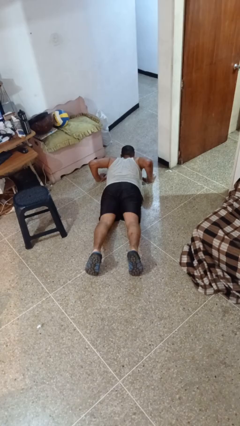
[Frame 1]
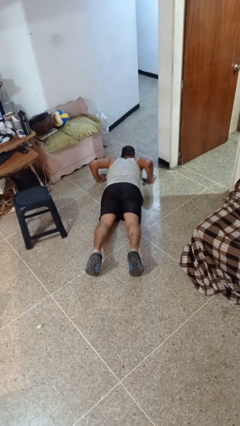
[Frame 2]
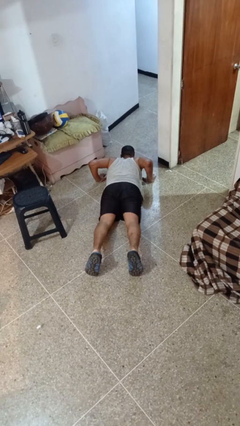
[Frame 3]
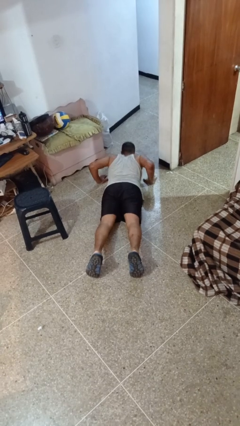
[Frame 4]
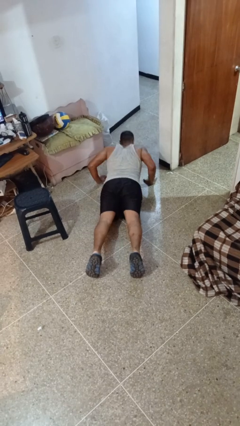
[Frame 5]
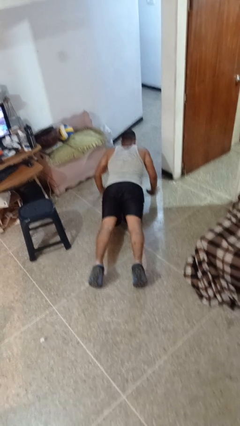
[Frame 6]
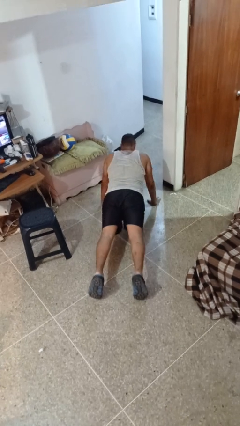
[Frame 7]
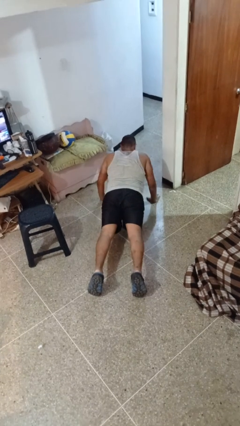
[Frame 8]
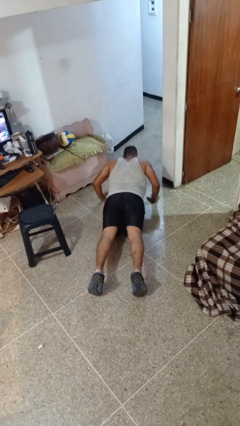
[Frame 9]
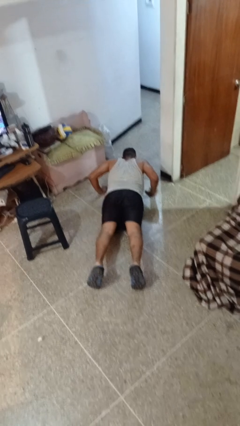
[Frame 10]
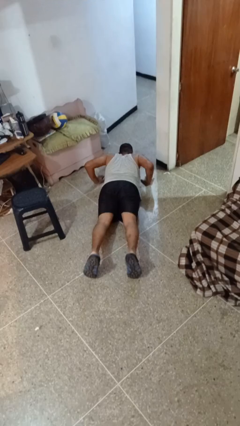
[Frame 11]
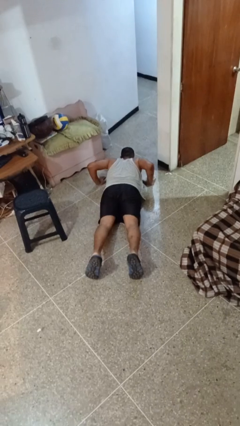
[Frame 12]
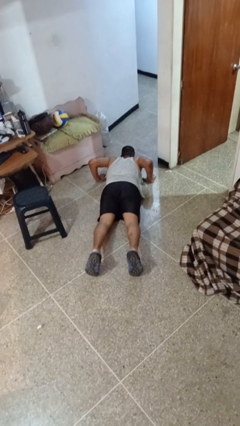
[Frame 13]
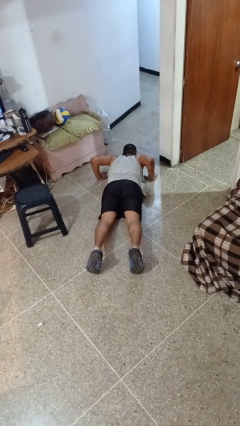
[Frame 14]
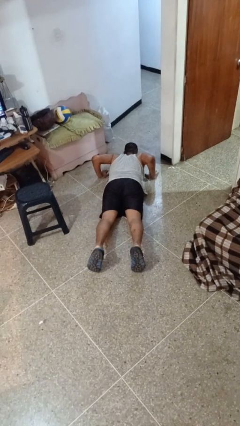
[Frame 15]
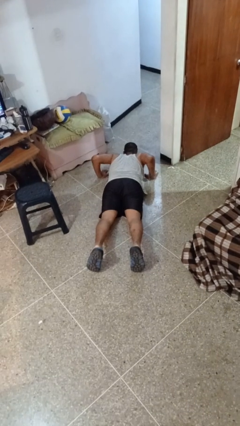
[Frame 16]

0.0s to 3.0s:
person exercises with pushup

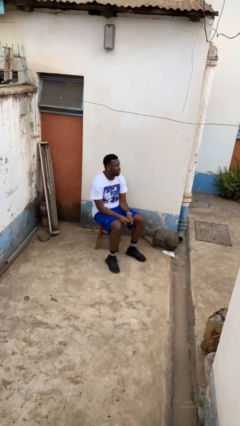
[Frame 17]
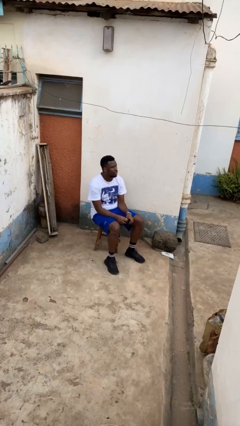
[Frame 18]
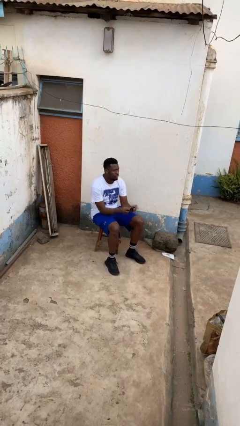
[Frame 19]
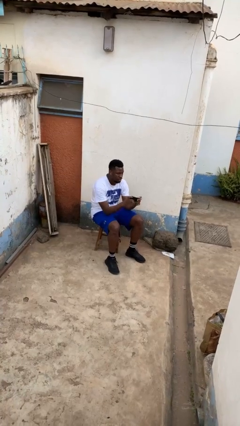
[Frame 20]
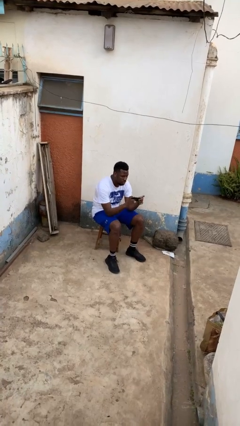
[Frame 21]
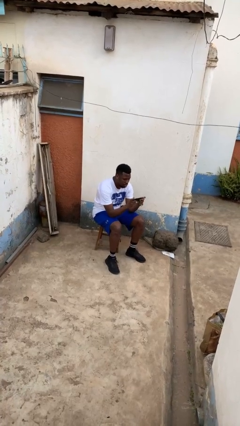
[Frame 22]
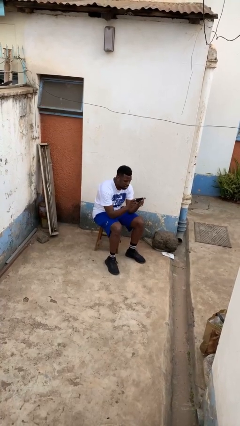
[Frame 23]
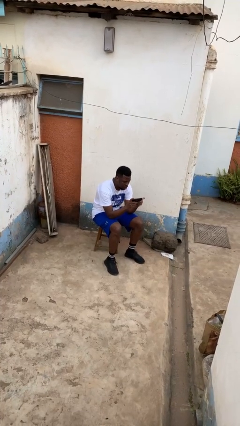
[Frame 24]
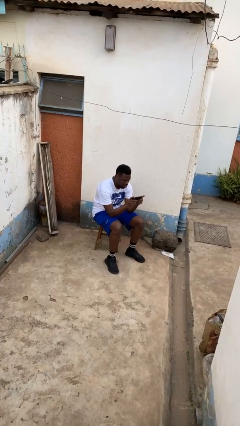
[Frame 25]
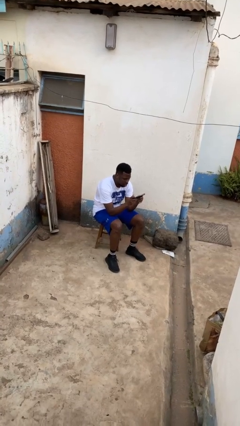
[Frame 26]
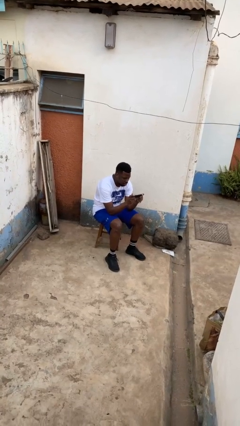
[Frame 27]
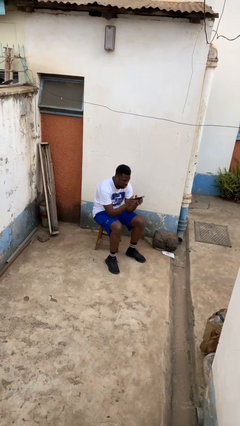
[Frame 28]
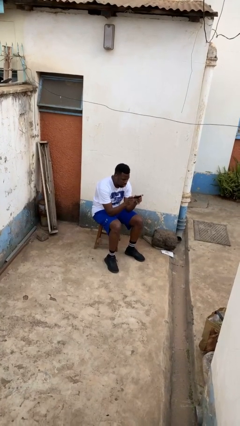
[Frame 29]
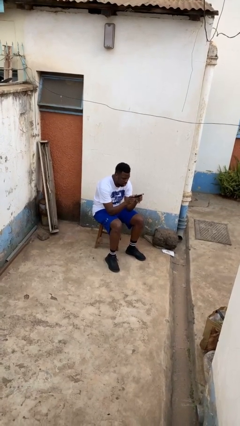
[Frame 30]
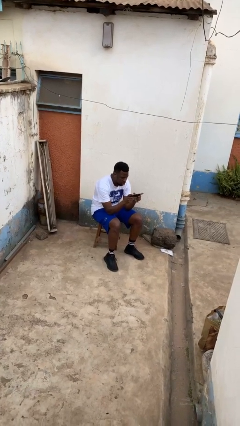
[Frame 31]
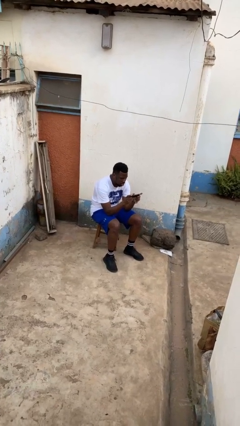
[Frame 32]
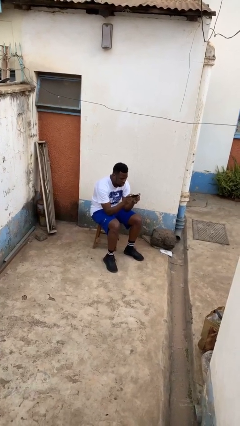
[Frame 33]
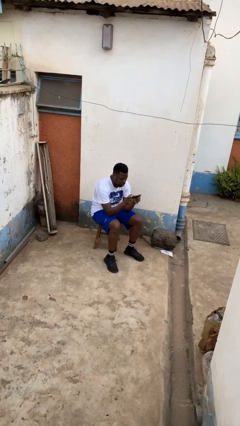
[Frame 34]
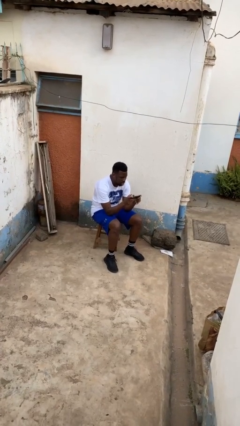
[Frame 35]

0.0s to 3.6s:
person interacts with handheld game

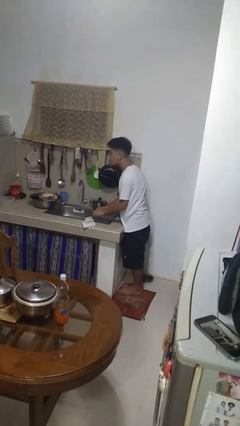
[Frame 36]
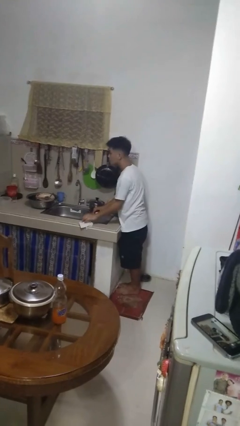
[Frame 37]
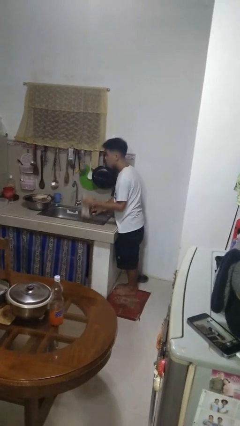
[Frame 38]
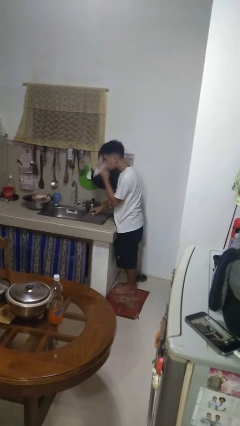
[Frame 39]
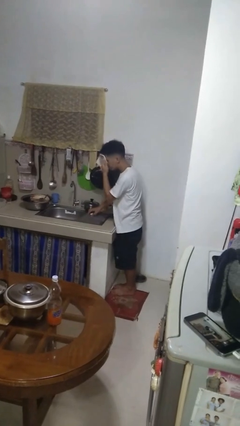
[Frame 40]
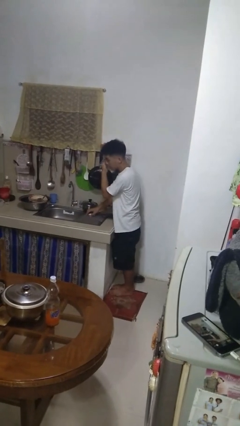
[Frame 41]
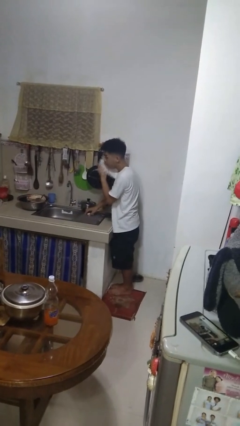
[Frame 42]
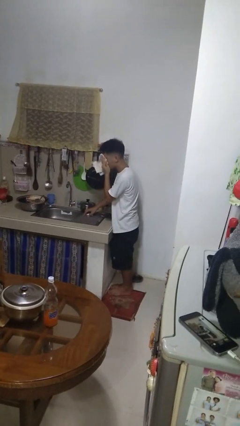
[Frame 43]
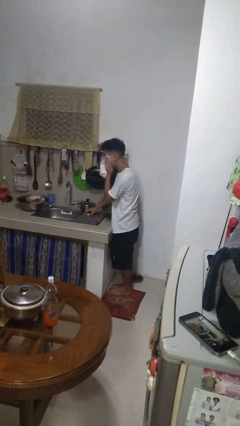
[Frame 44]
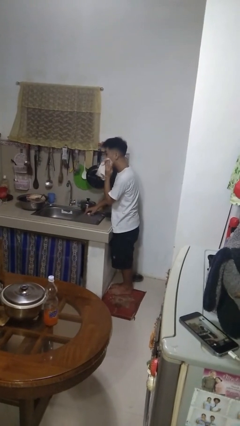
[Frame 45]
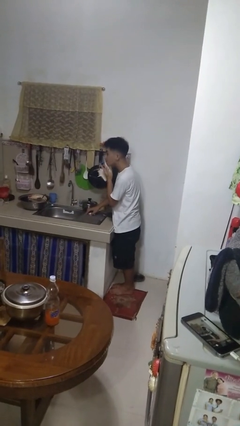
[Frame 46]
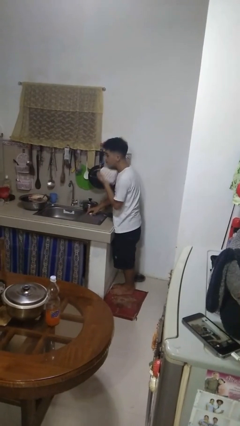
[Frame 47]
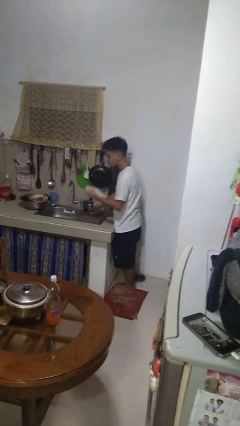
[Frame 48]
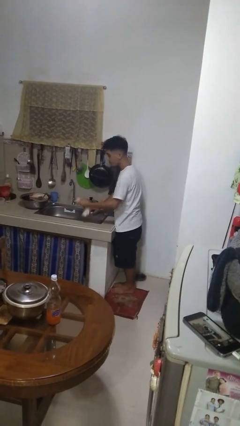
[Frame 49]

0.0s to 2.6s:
person dries face with towel

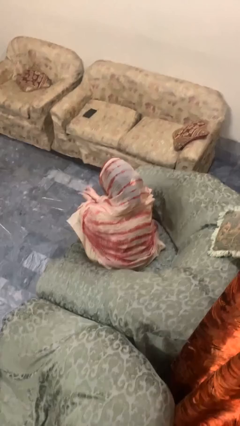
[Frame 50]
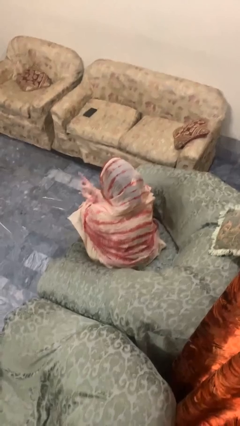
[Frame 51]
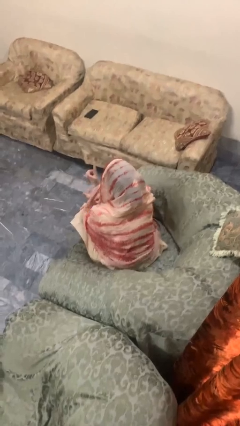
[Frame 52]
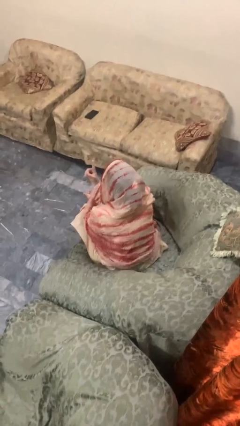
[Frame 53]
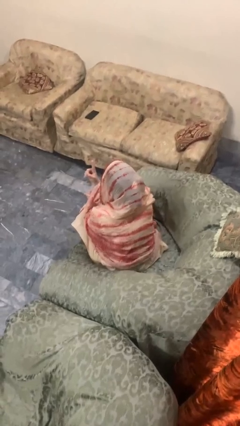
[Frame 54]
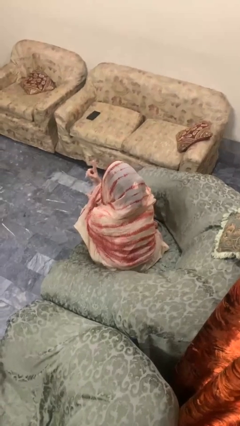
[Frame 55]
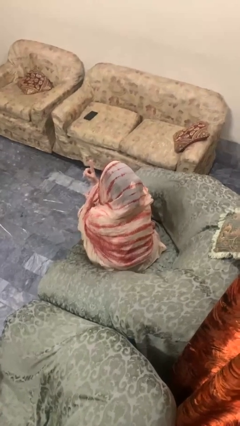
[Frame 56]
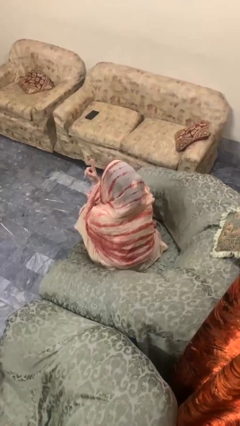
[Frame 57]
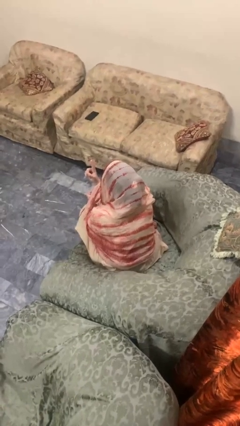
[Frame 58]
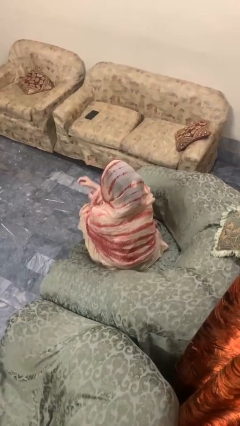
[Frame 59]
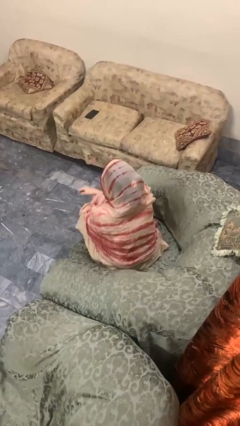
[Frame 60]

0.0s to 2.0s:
person gestures number one

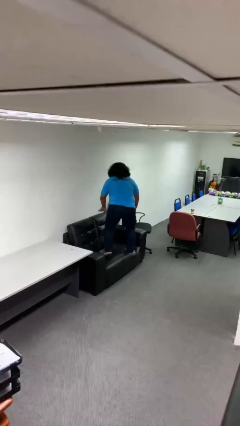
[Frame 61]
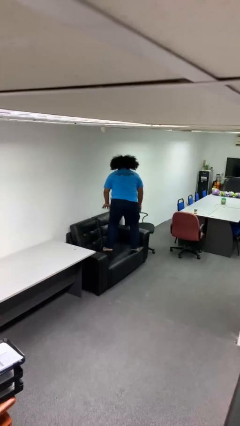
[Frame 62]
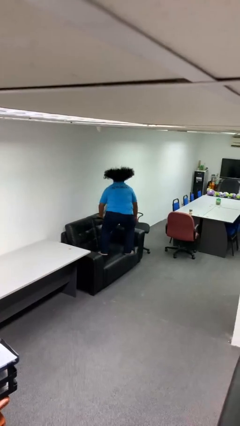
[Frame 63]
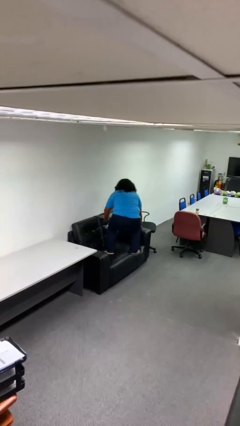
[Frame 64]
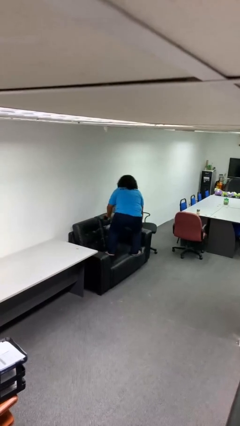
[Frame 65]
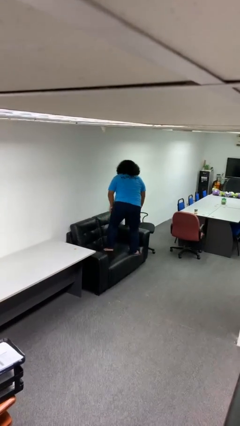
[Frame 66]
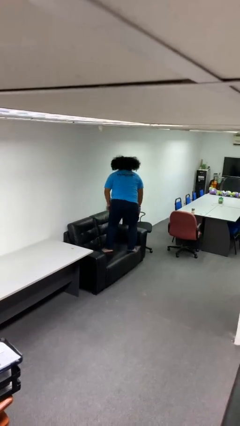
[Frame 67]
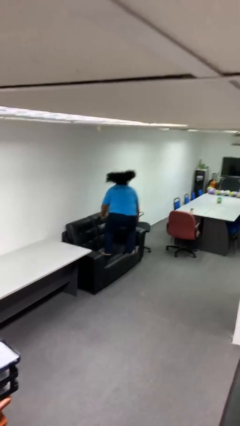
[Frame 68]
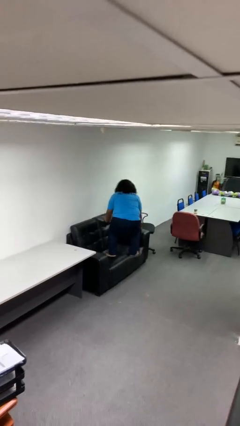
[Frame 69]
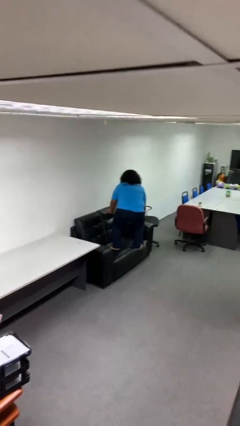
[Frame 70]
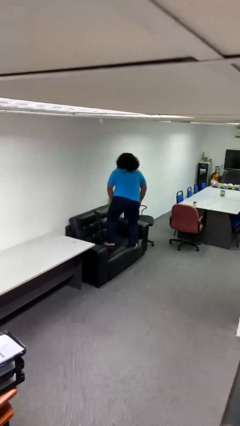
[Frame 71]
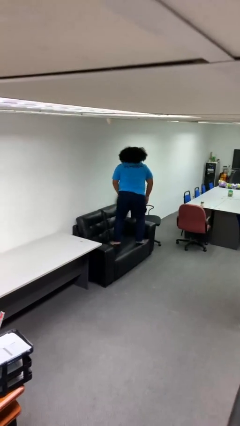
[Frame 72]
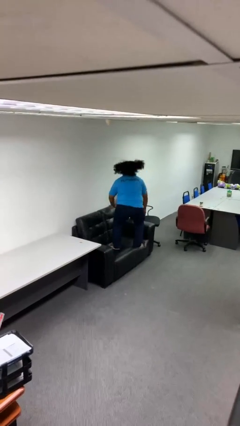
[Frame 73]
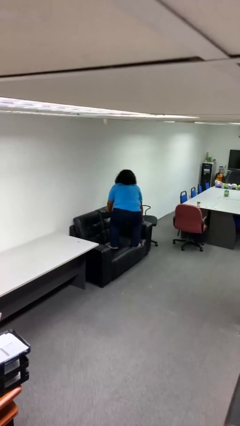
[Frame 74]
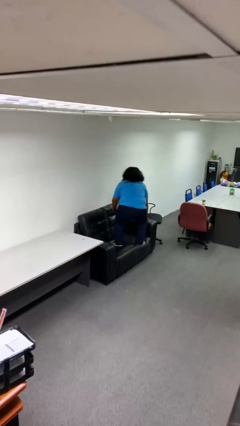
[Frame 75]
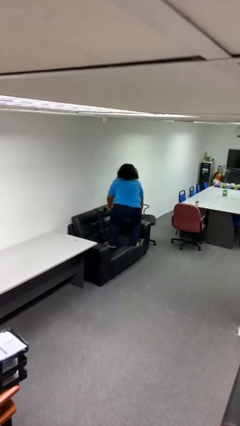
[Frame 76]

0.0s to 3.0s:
person jumps on couch

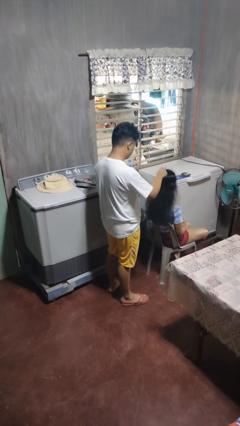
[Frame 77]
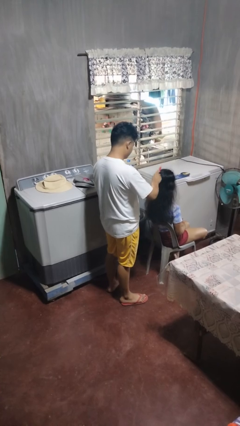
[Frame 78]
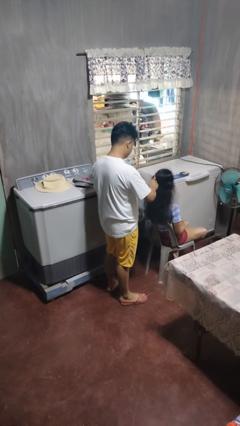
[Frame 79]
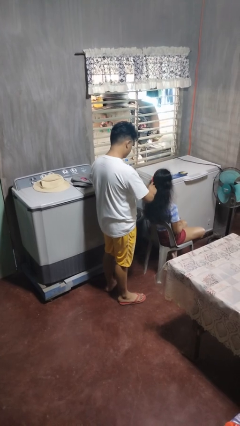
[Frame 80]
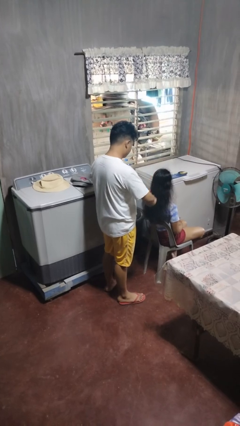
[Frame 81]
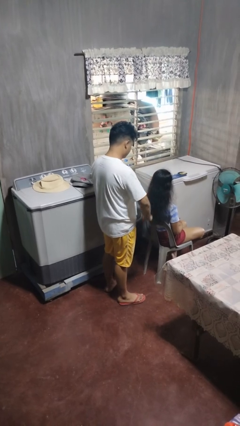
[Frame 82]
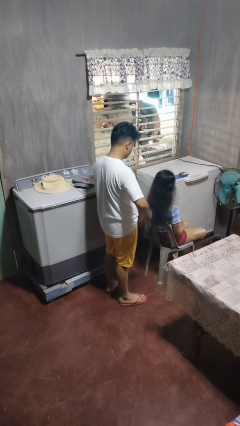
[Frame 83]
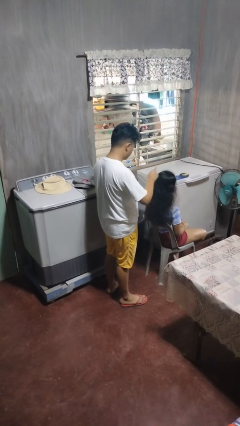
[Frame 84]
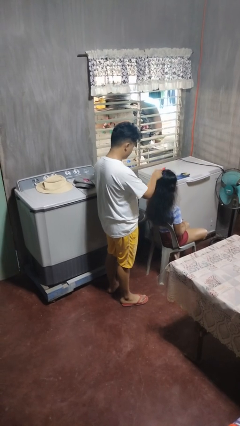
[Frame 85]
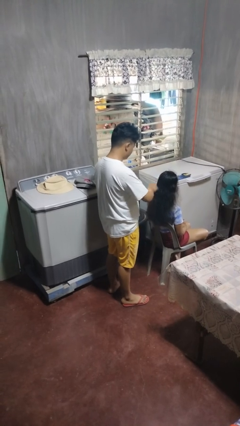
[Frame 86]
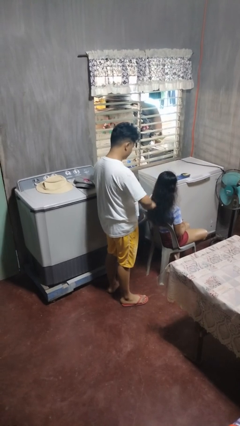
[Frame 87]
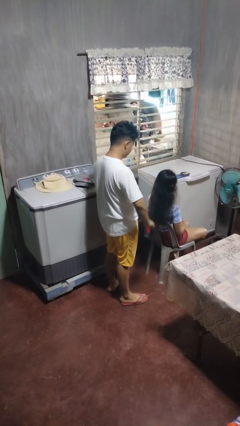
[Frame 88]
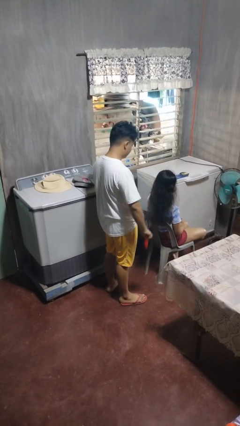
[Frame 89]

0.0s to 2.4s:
person brushes hair of person

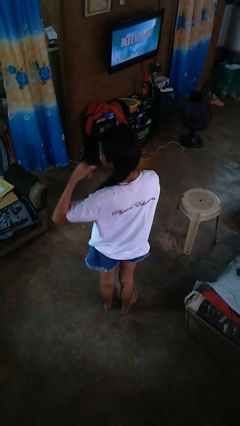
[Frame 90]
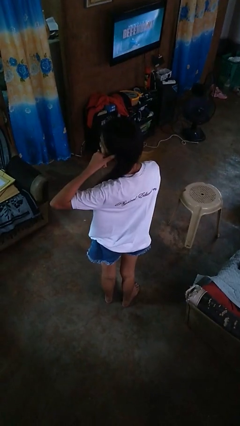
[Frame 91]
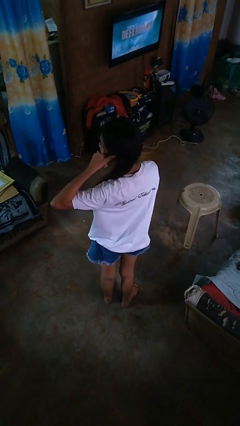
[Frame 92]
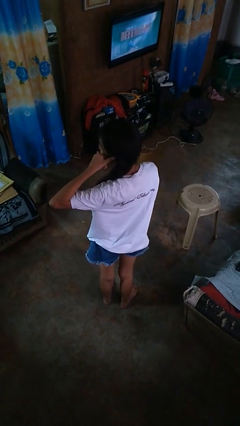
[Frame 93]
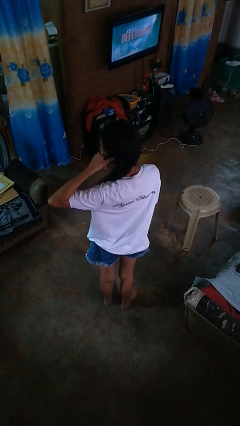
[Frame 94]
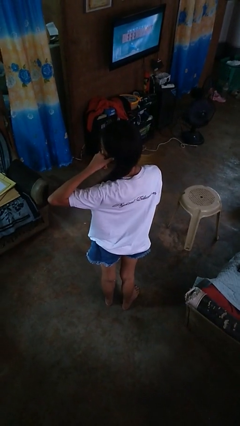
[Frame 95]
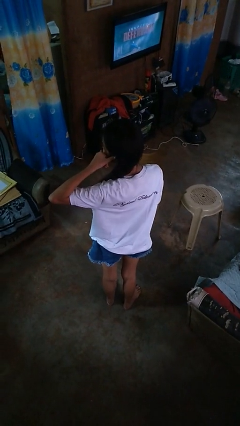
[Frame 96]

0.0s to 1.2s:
person gestures call me
